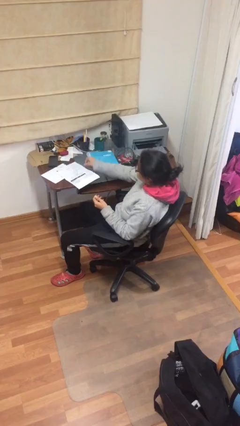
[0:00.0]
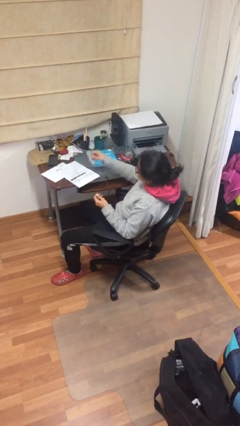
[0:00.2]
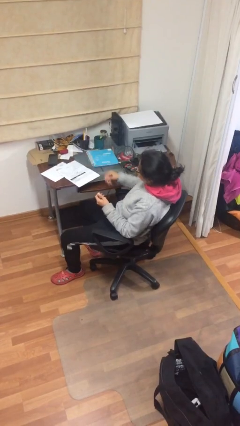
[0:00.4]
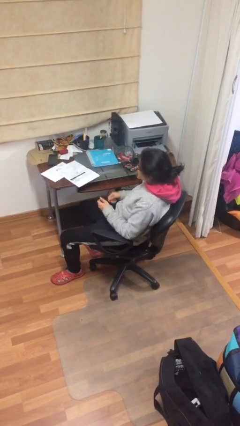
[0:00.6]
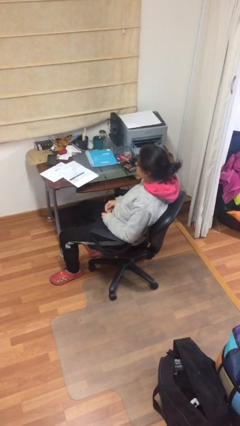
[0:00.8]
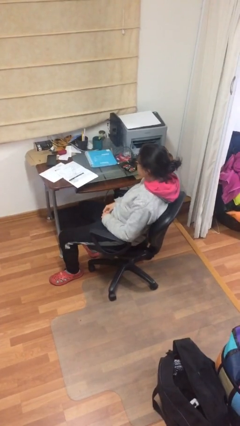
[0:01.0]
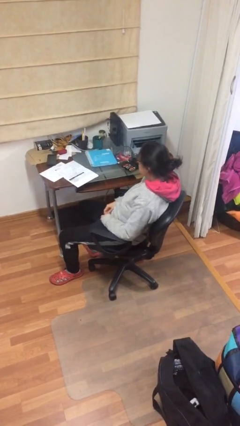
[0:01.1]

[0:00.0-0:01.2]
person puts down object on table

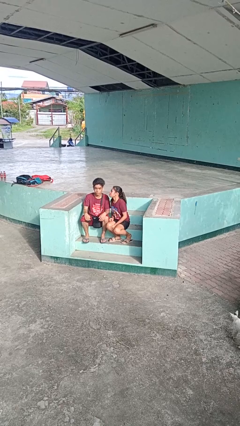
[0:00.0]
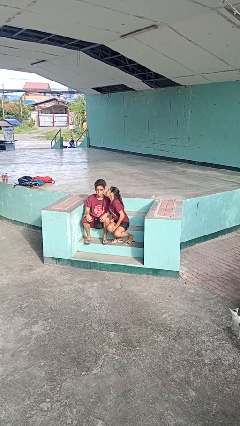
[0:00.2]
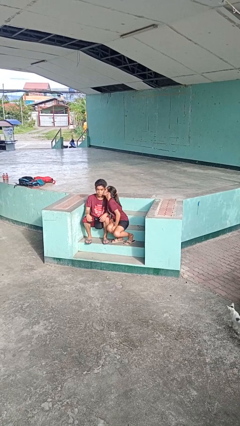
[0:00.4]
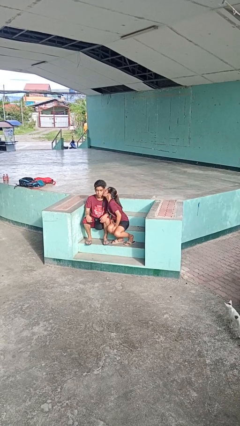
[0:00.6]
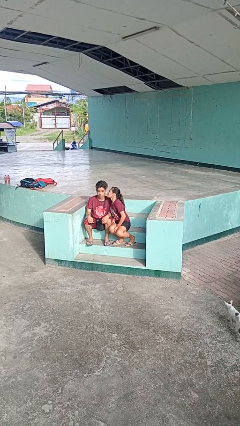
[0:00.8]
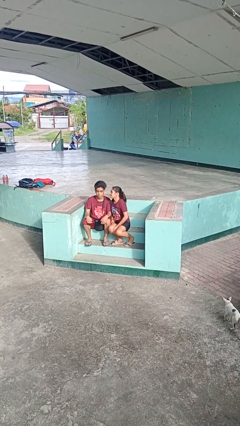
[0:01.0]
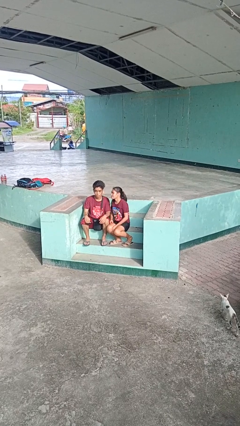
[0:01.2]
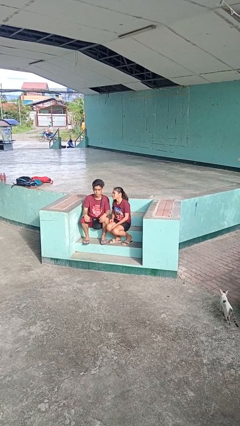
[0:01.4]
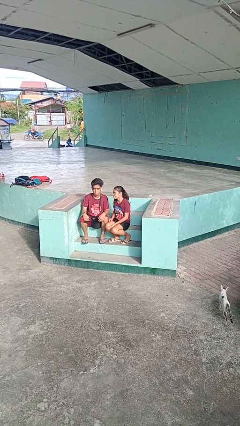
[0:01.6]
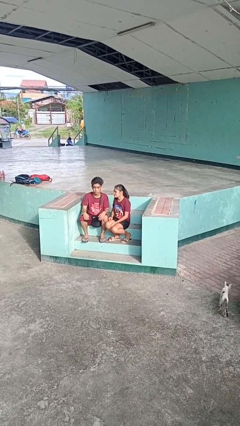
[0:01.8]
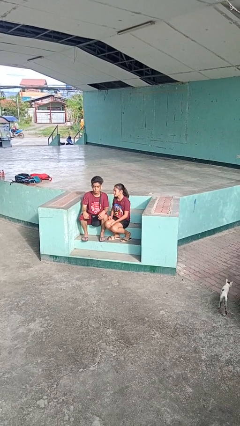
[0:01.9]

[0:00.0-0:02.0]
person kisses cheek of person

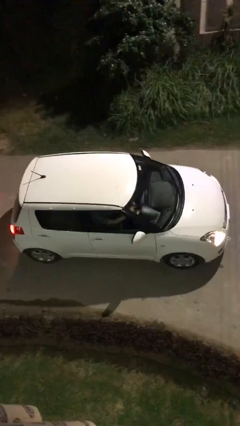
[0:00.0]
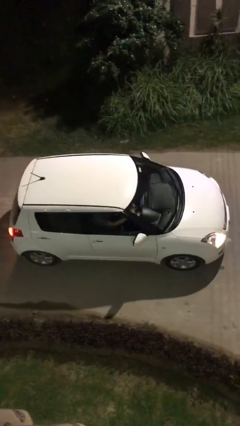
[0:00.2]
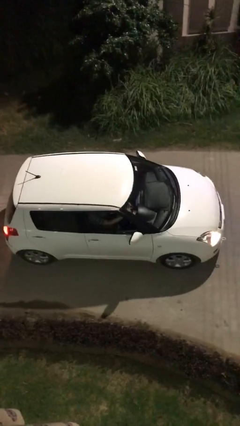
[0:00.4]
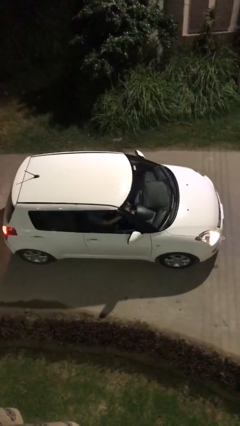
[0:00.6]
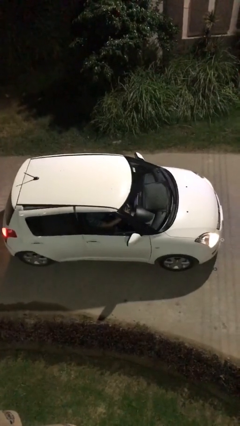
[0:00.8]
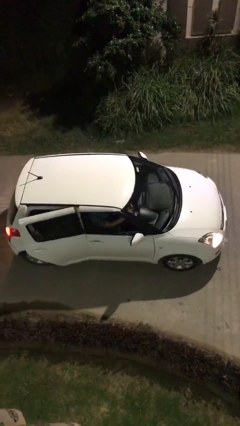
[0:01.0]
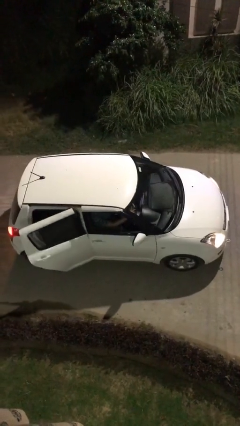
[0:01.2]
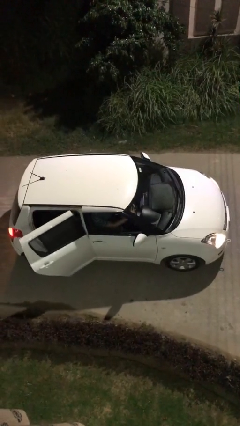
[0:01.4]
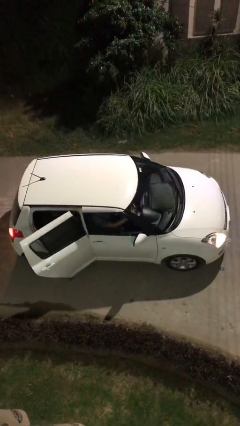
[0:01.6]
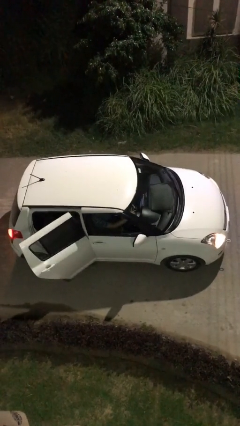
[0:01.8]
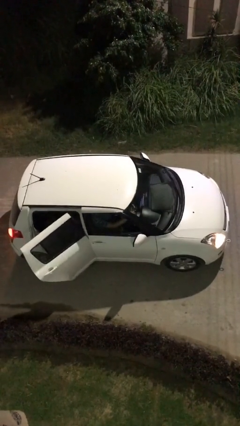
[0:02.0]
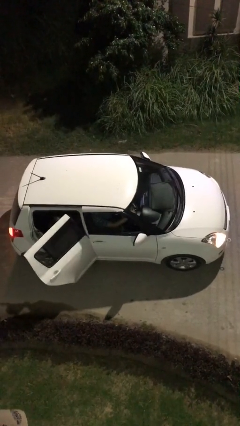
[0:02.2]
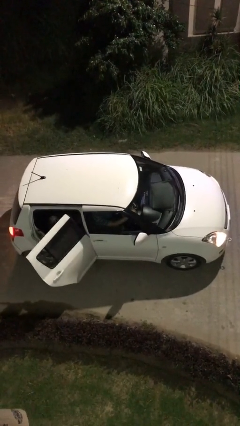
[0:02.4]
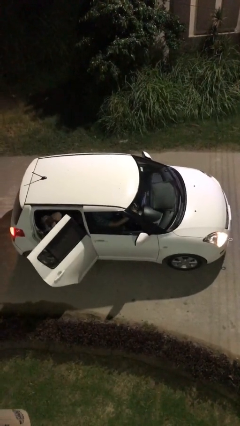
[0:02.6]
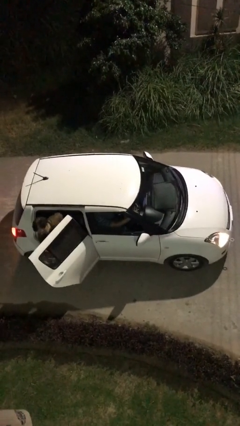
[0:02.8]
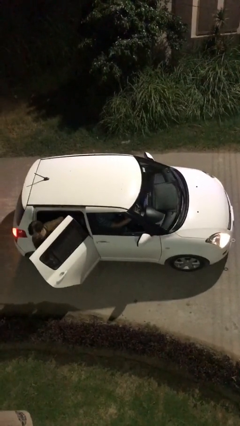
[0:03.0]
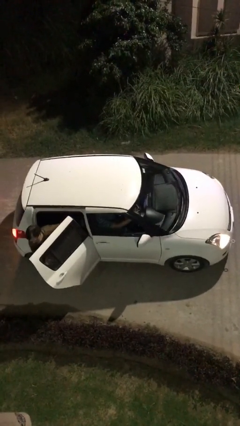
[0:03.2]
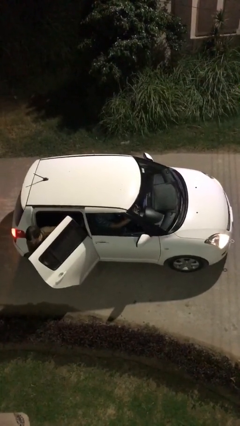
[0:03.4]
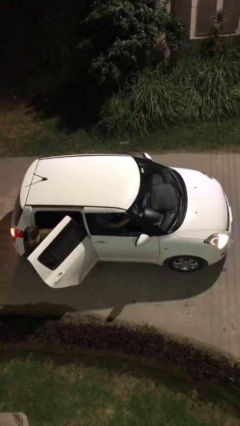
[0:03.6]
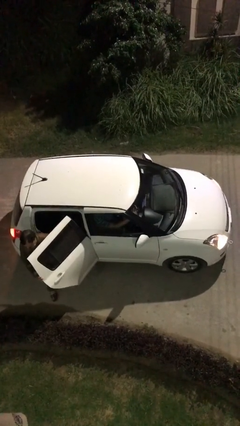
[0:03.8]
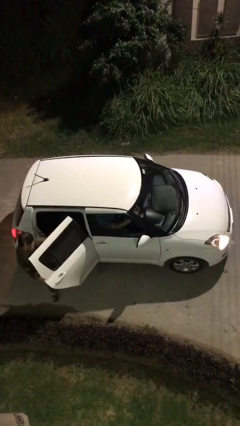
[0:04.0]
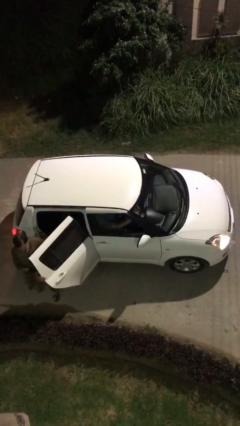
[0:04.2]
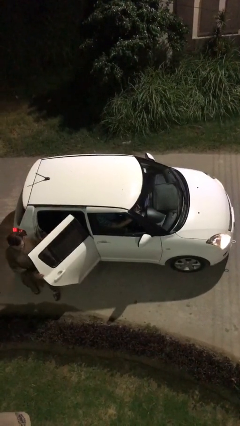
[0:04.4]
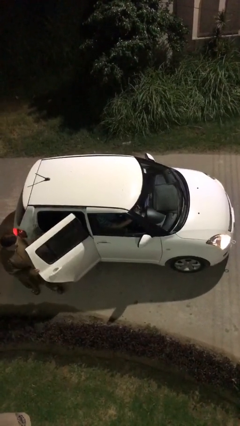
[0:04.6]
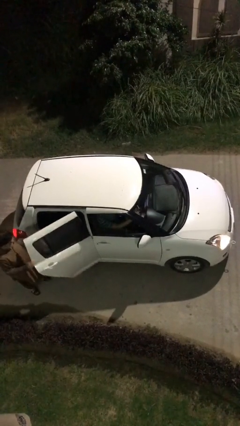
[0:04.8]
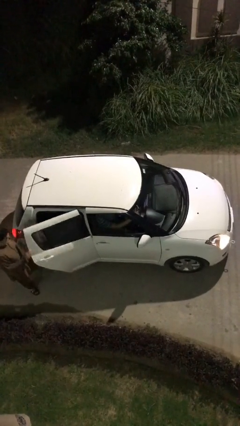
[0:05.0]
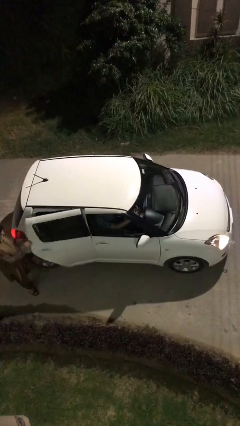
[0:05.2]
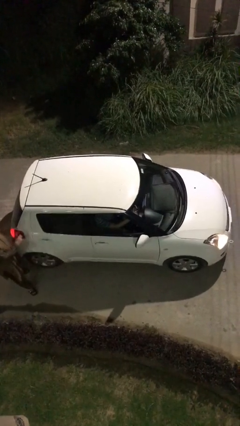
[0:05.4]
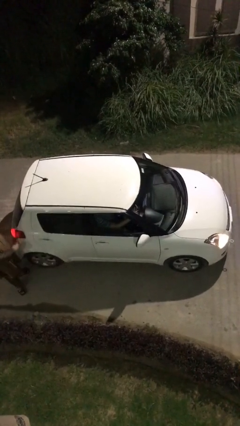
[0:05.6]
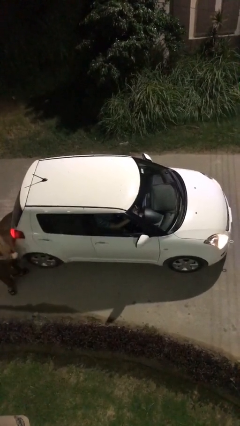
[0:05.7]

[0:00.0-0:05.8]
car drops off person

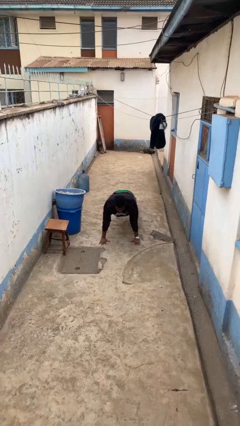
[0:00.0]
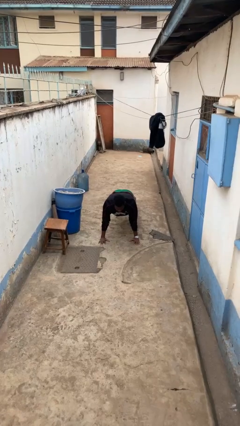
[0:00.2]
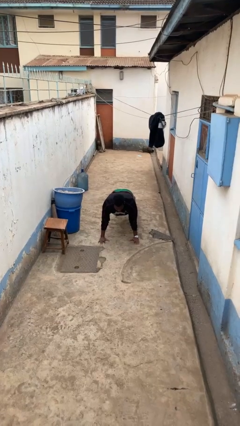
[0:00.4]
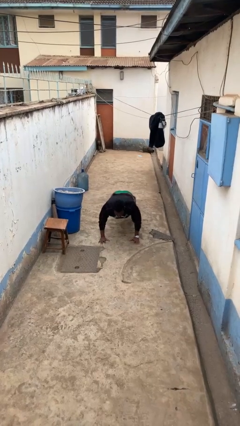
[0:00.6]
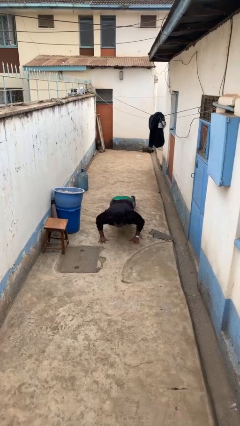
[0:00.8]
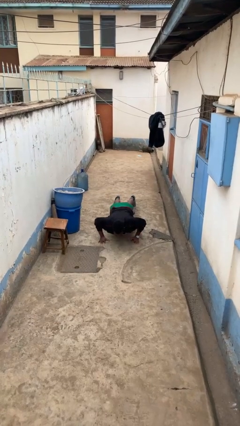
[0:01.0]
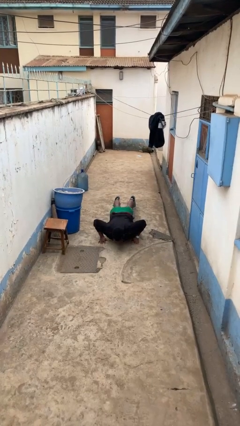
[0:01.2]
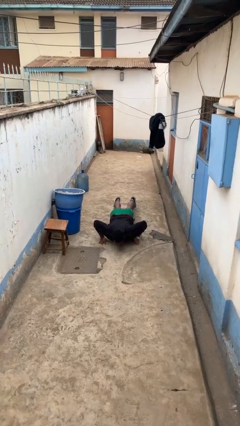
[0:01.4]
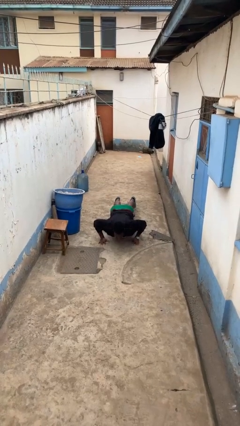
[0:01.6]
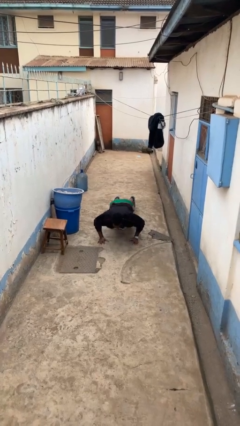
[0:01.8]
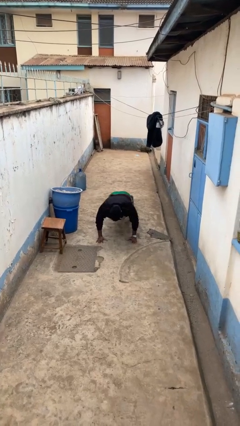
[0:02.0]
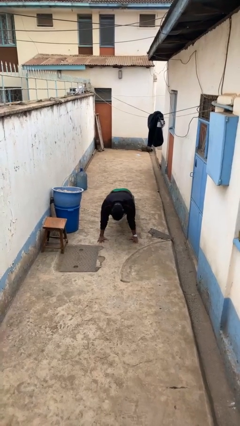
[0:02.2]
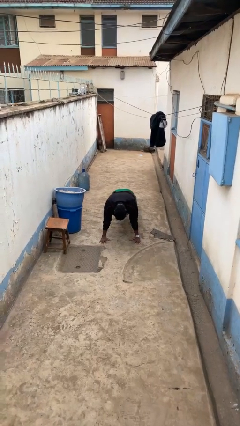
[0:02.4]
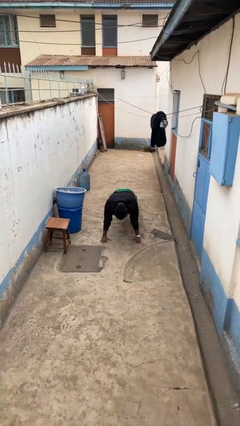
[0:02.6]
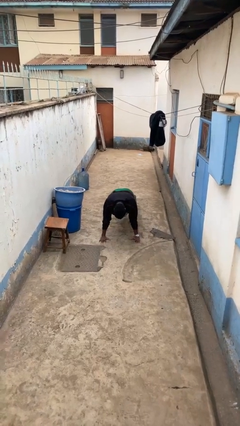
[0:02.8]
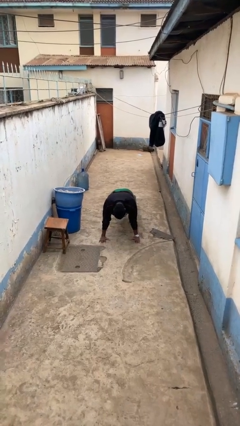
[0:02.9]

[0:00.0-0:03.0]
person exercises with pushup

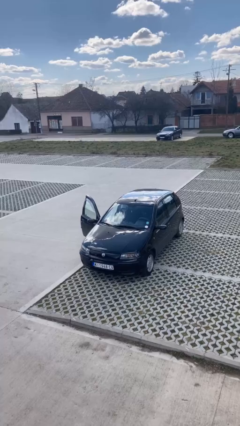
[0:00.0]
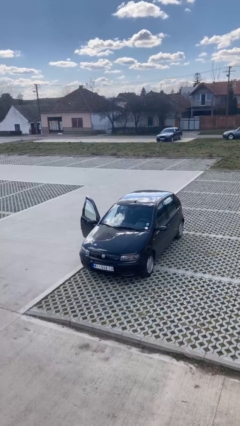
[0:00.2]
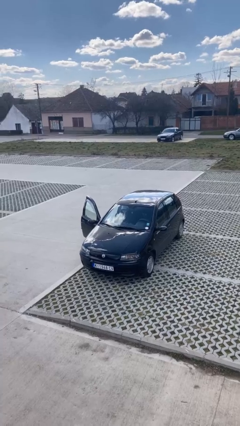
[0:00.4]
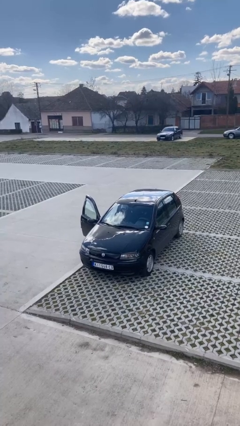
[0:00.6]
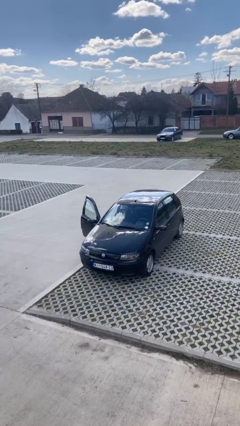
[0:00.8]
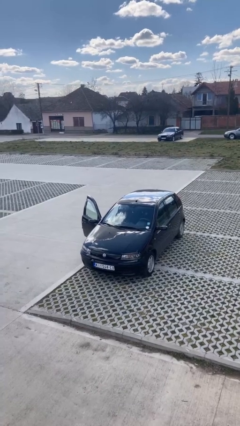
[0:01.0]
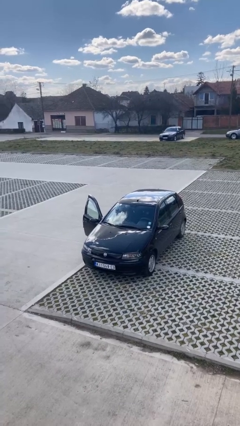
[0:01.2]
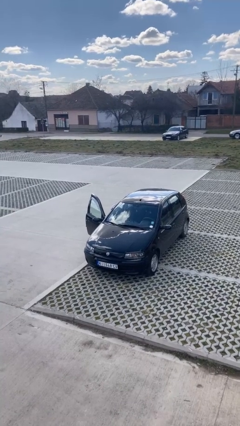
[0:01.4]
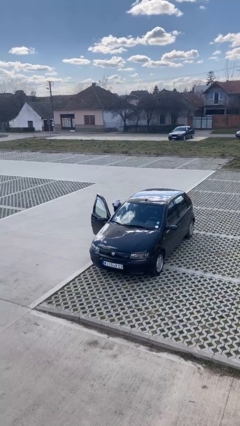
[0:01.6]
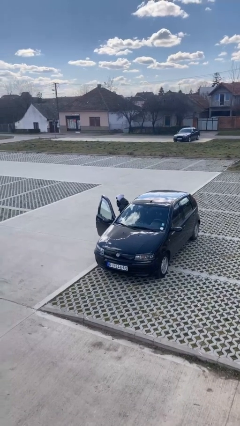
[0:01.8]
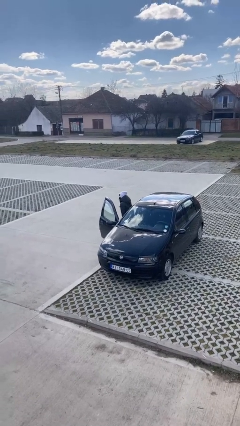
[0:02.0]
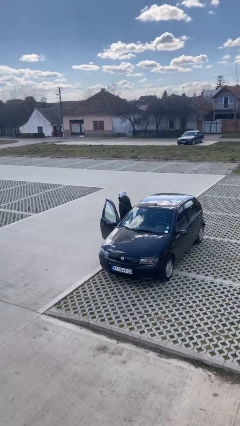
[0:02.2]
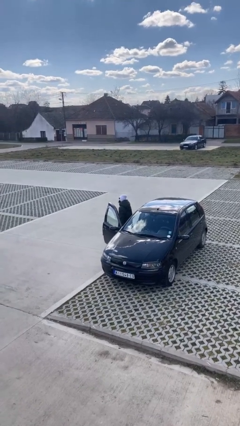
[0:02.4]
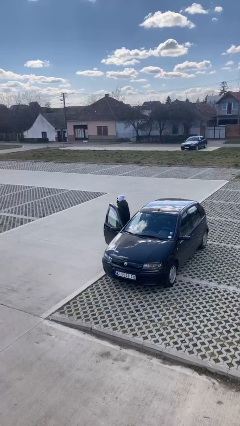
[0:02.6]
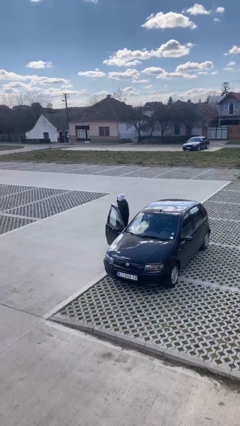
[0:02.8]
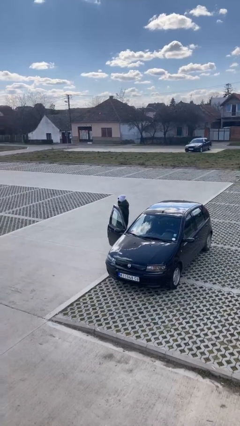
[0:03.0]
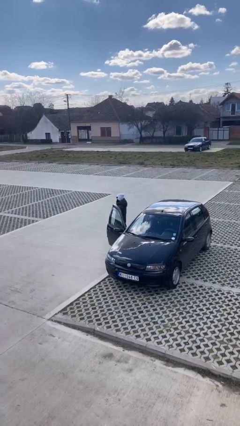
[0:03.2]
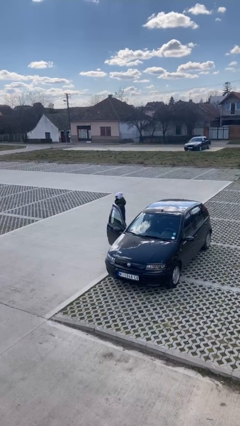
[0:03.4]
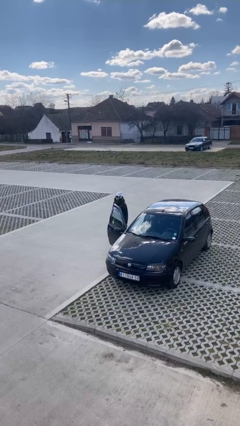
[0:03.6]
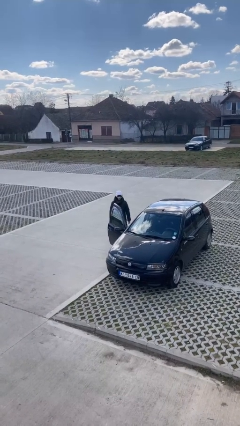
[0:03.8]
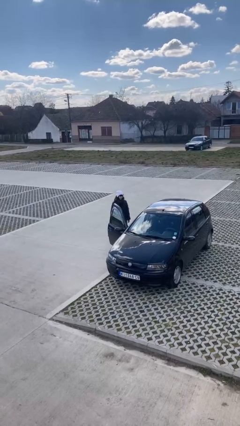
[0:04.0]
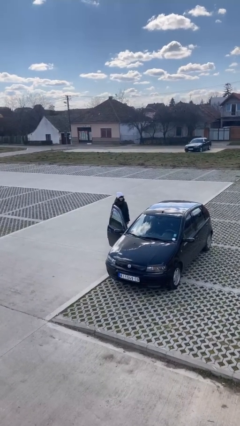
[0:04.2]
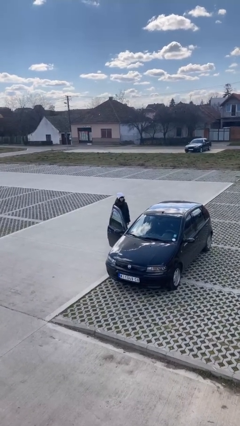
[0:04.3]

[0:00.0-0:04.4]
person exits car

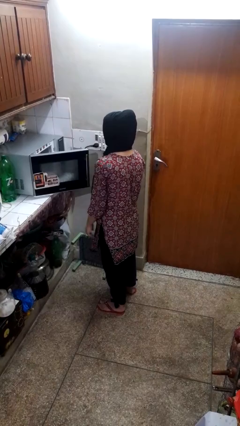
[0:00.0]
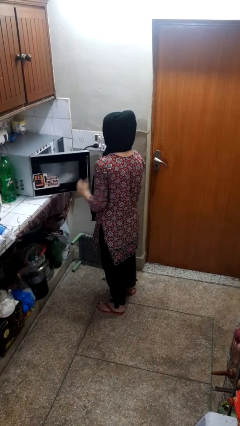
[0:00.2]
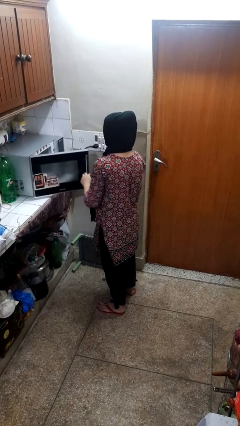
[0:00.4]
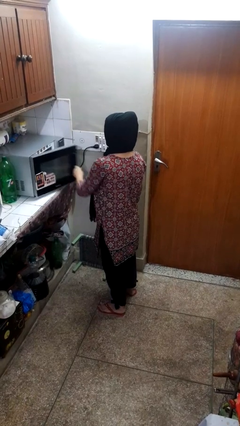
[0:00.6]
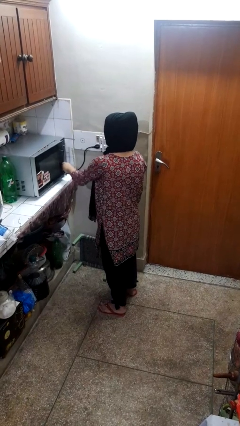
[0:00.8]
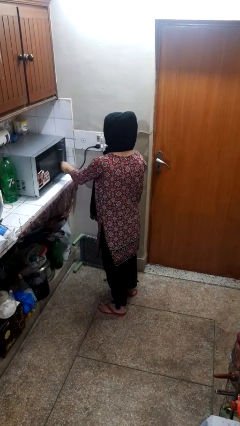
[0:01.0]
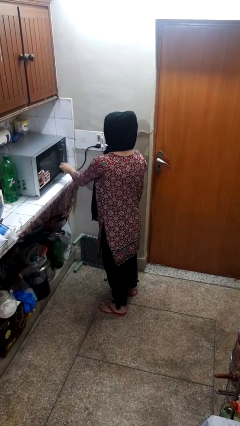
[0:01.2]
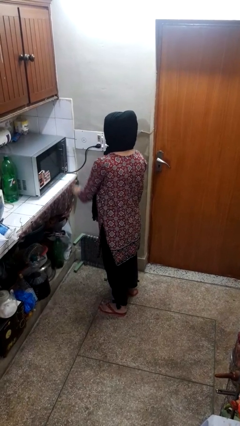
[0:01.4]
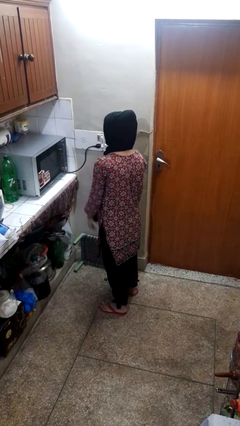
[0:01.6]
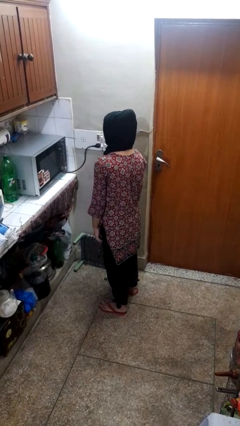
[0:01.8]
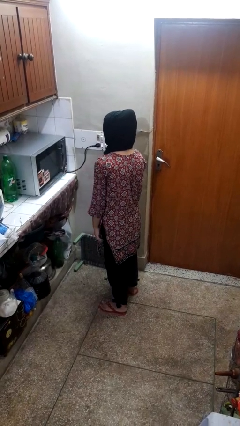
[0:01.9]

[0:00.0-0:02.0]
person closes oven door
